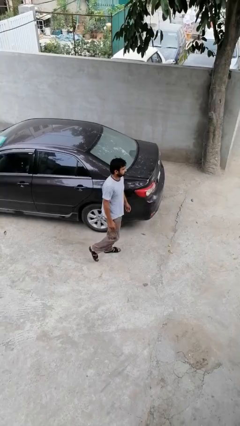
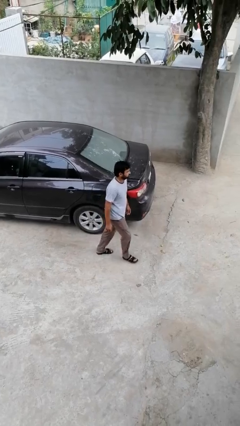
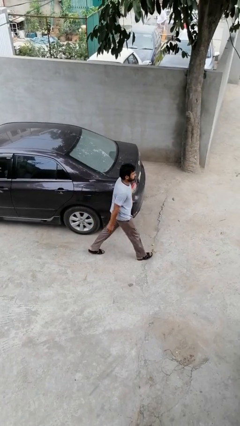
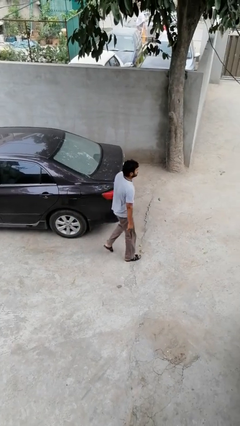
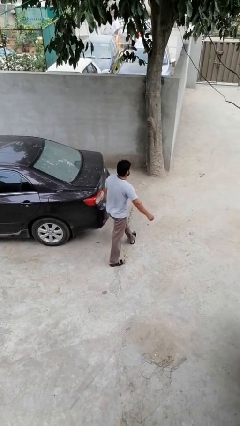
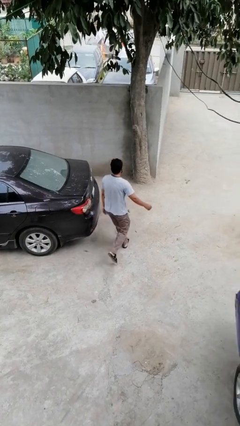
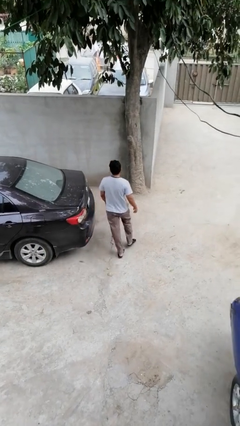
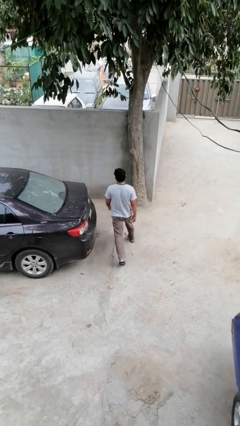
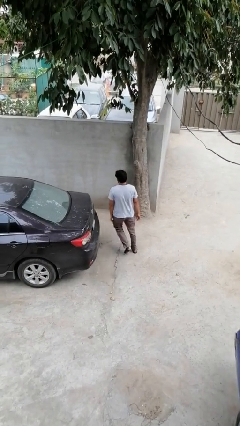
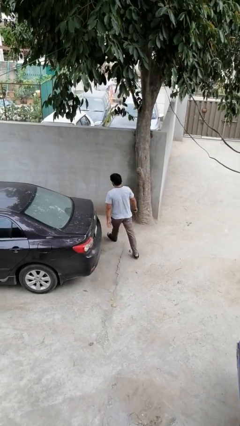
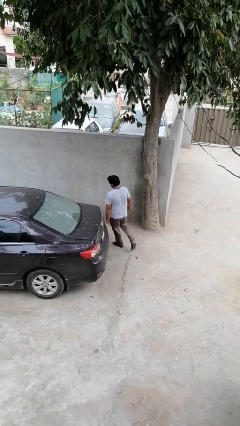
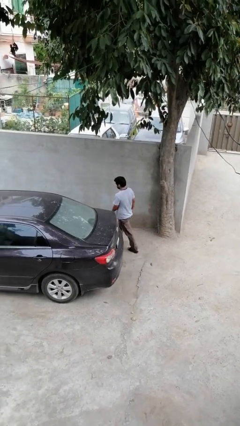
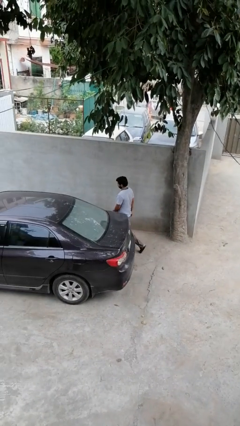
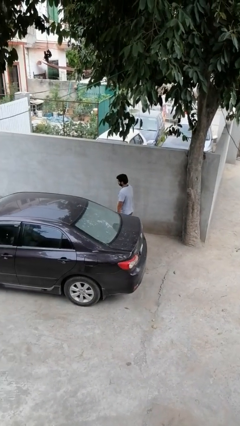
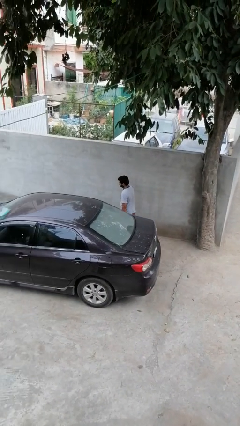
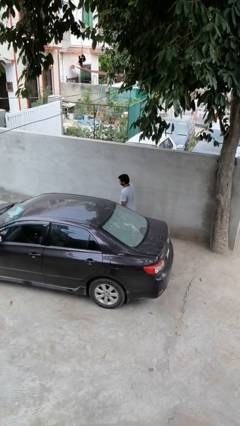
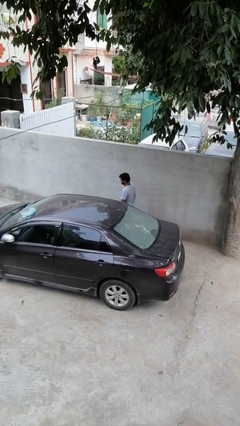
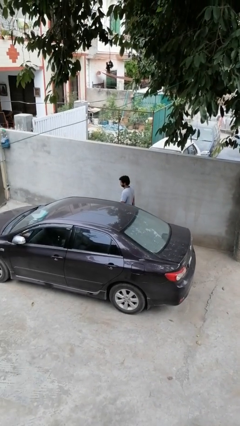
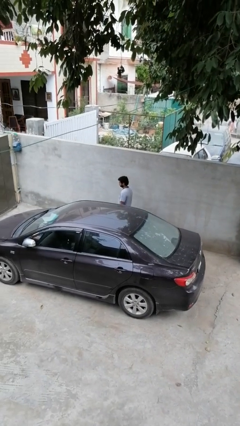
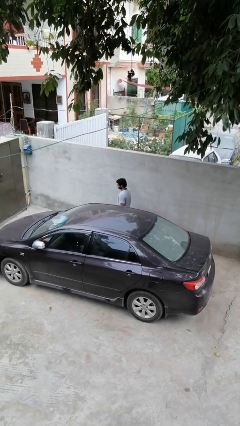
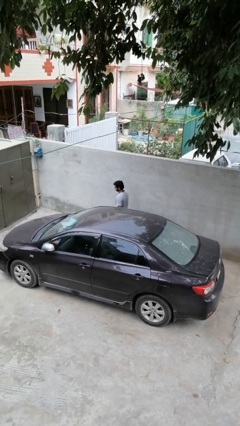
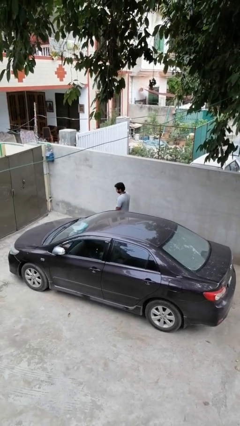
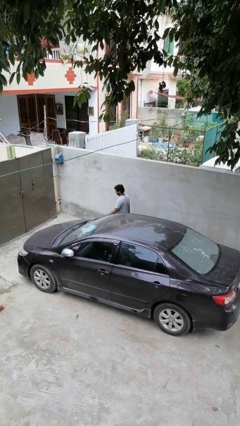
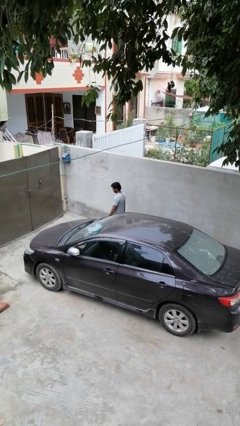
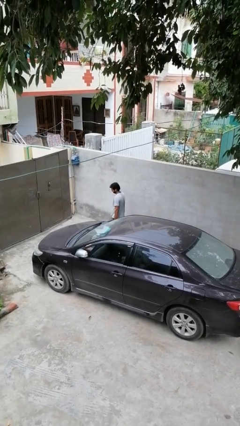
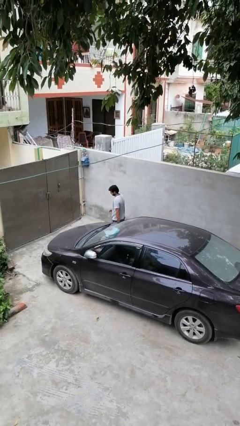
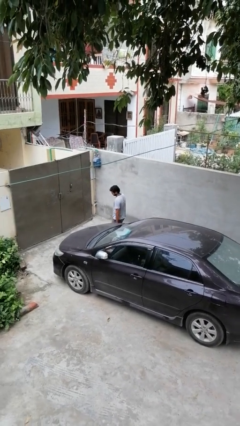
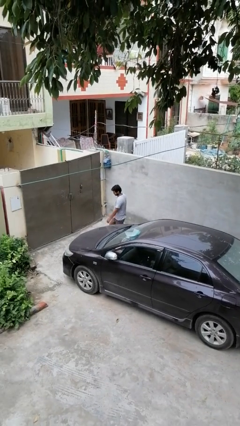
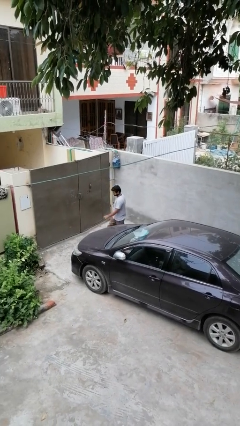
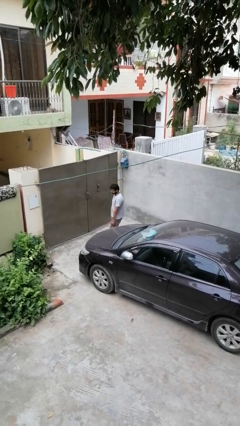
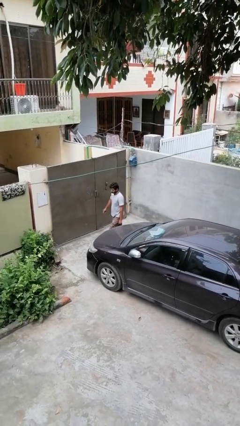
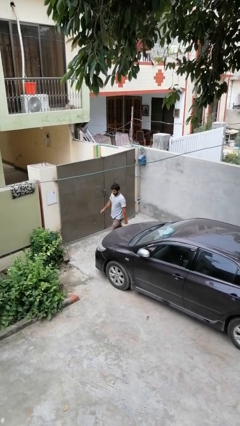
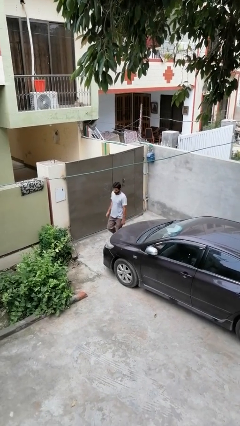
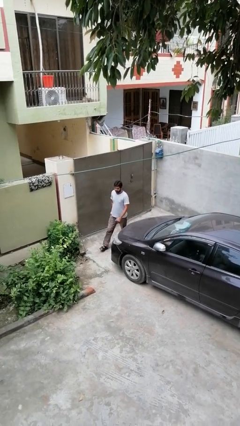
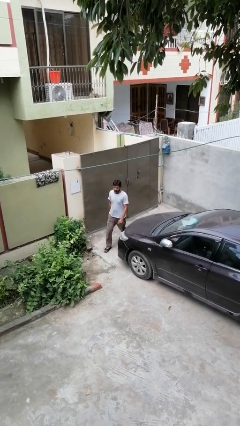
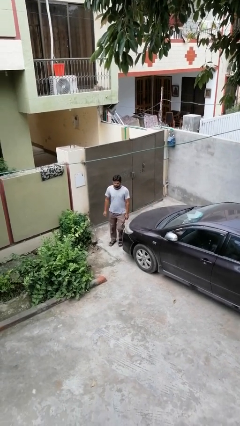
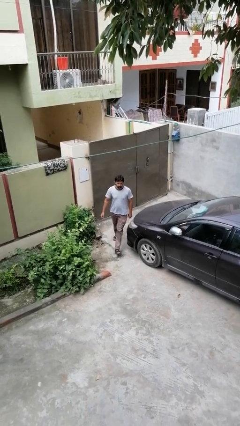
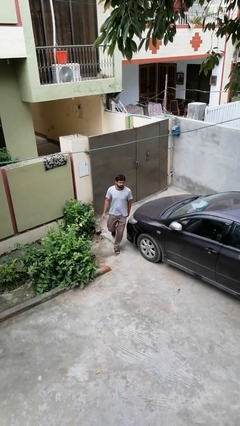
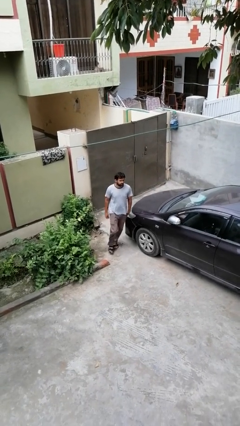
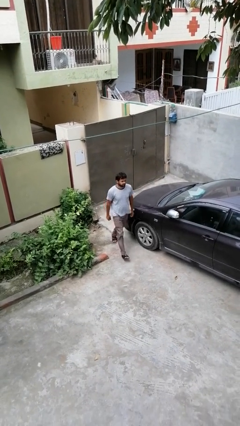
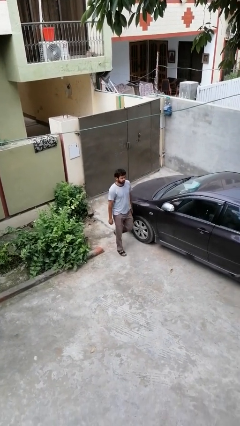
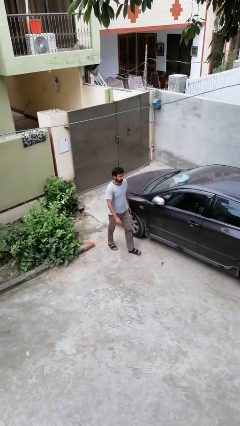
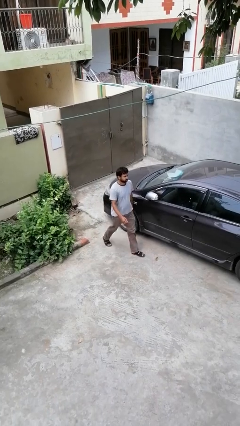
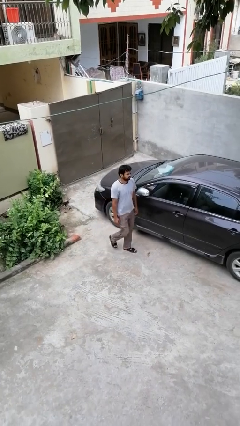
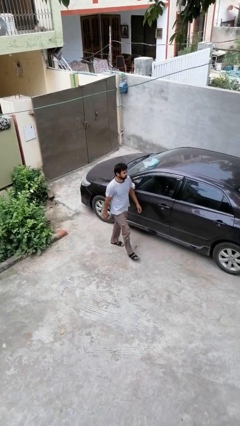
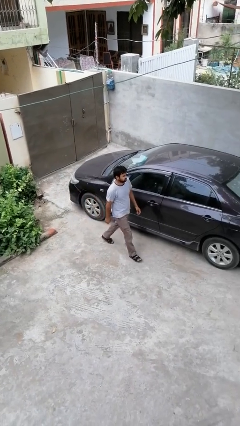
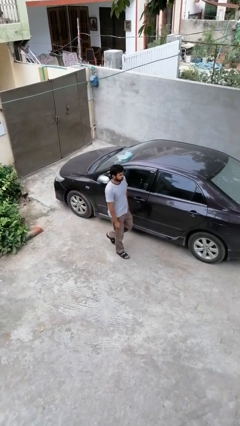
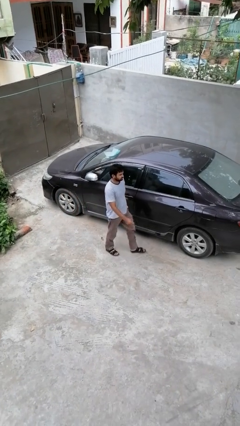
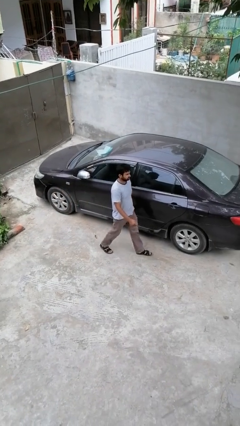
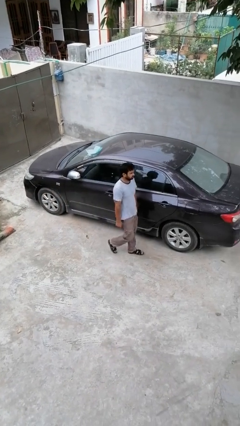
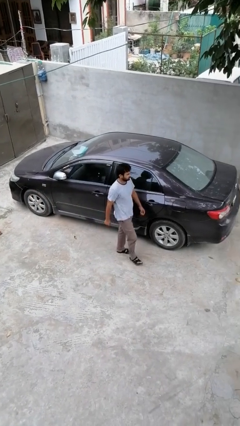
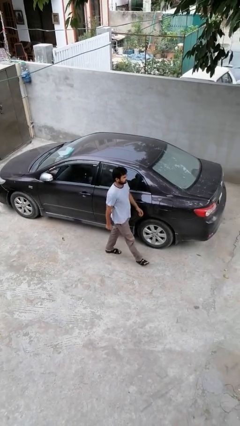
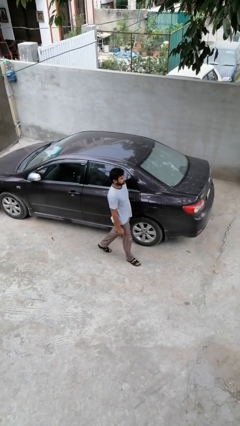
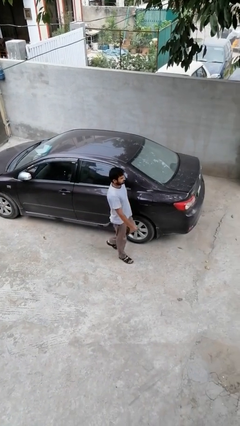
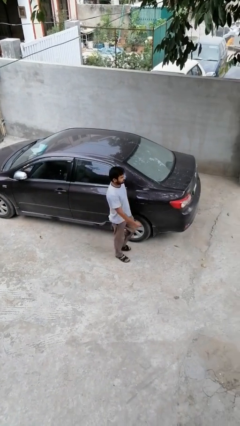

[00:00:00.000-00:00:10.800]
person walks around car

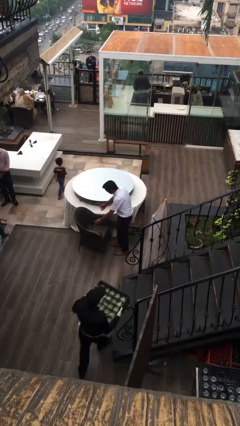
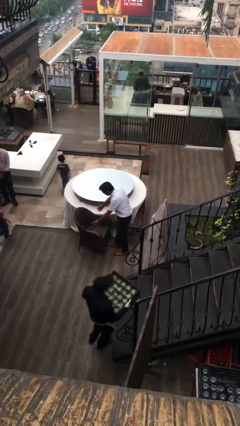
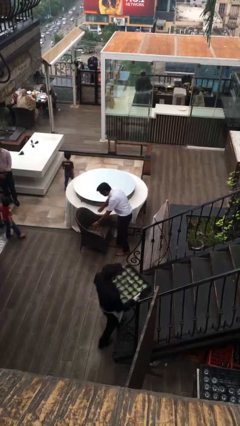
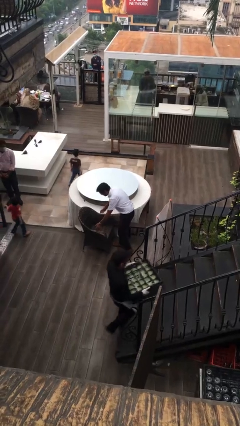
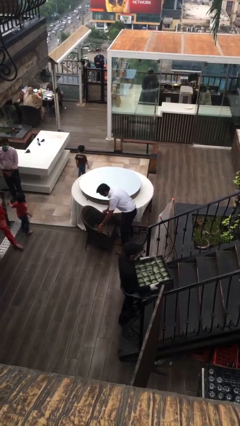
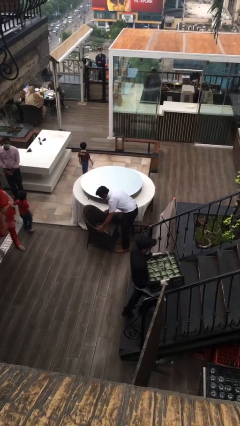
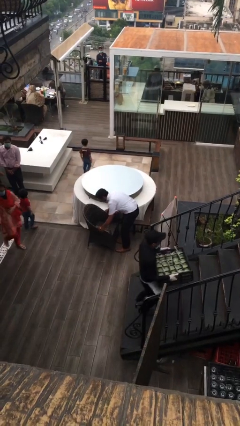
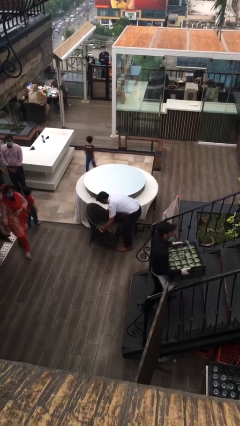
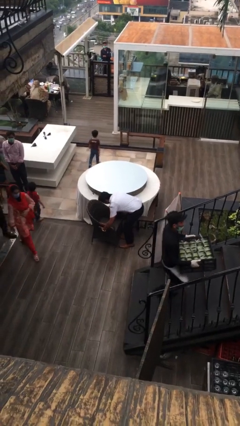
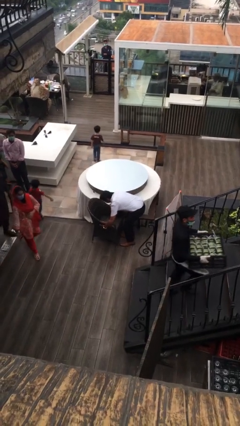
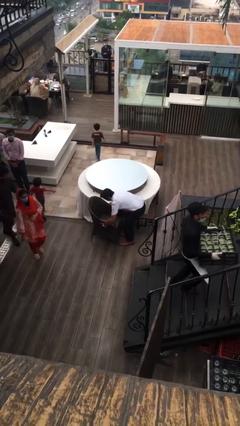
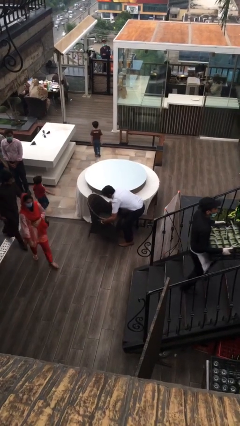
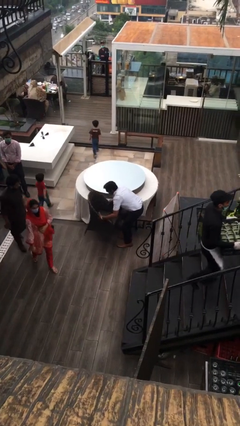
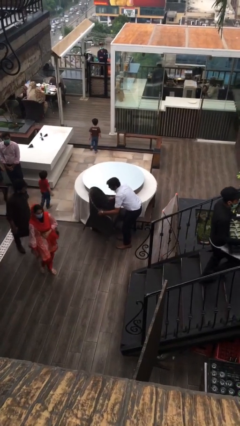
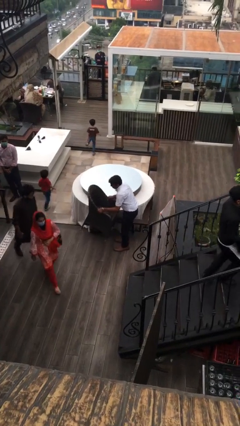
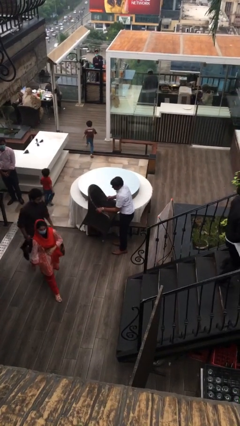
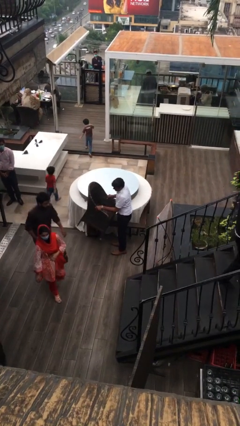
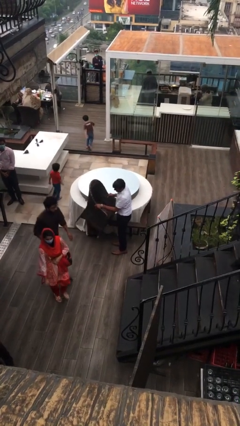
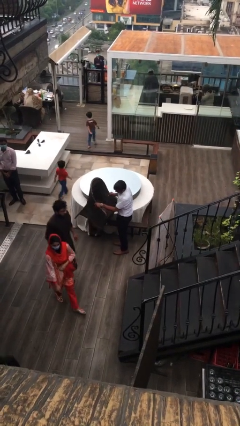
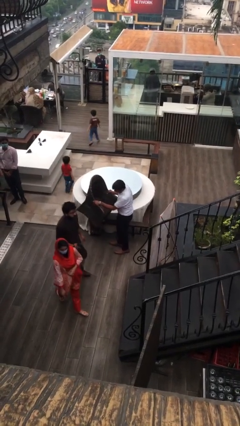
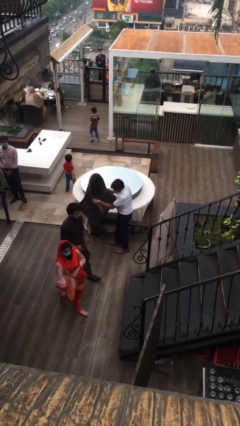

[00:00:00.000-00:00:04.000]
person picks up object from floor

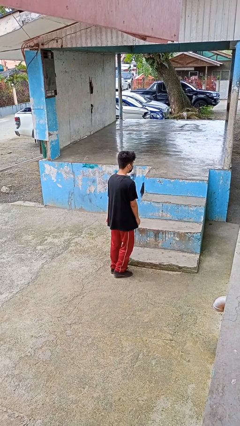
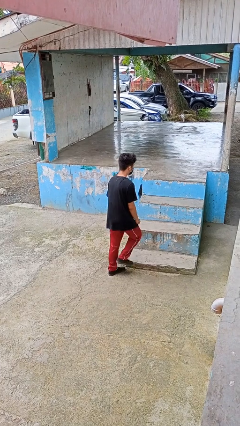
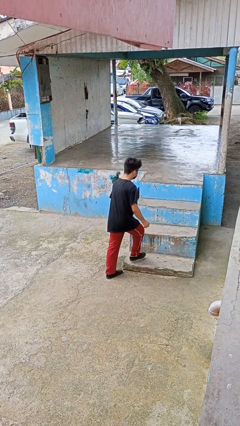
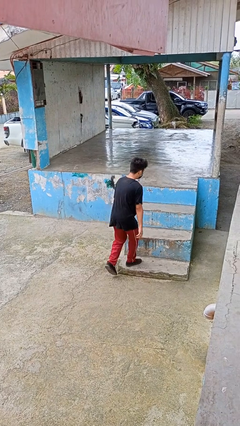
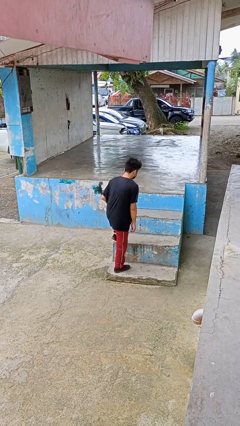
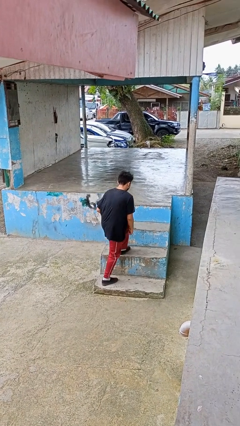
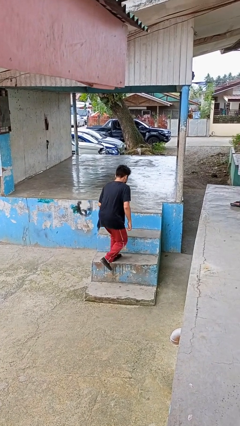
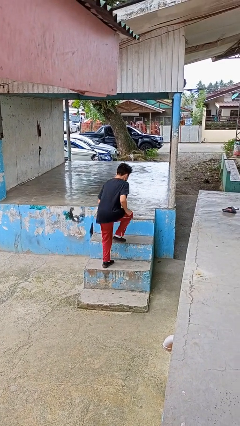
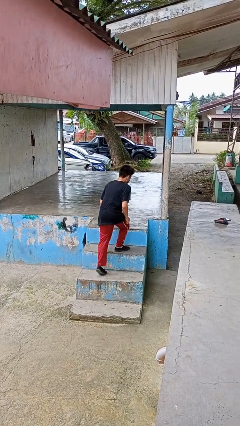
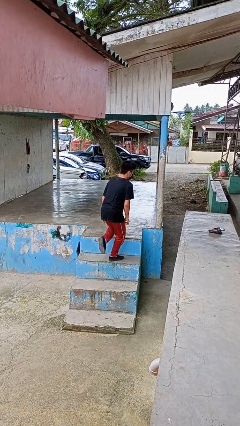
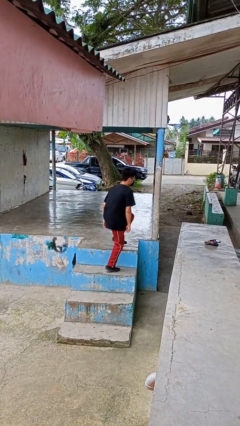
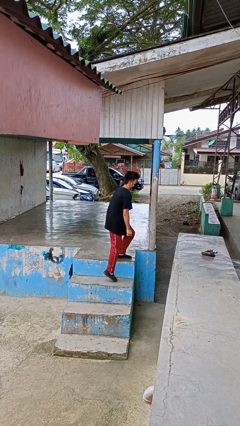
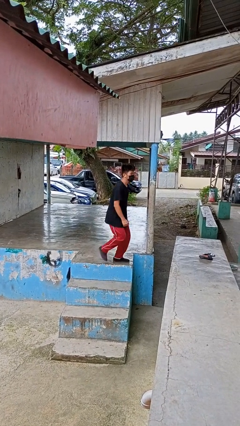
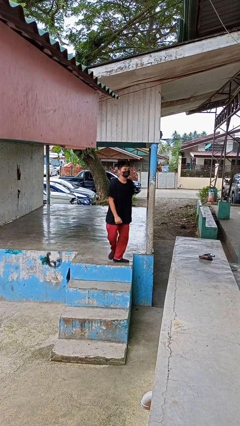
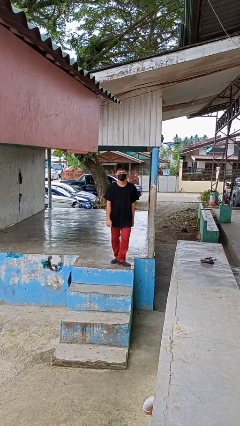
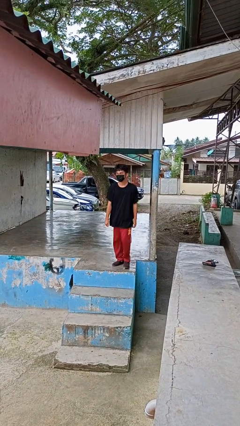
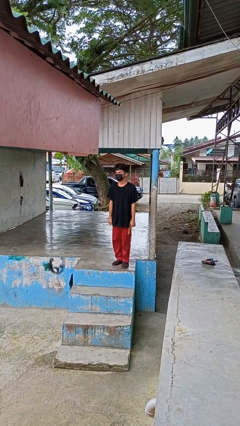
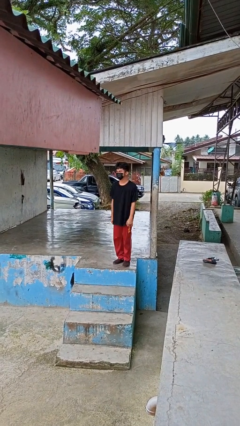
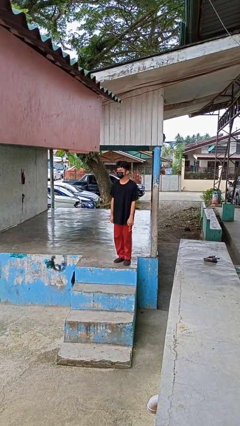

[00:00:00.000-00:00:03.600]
person climbs up stairs
